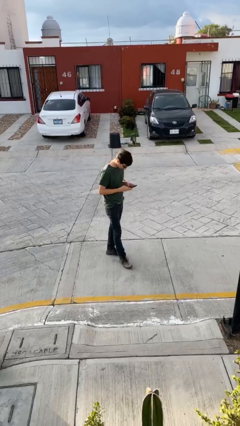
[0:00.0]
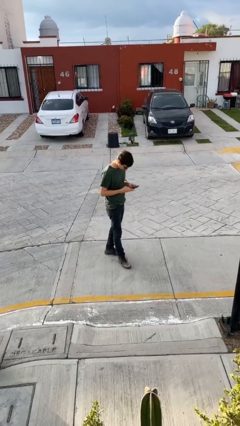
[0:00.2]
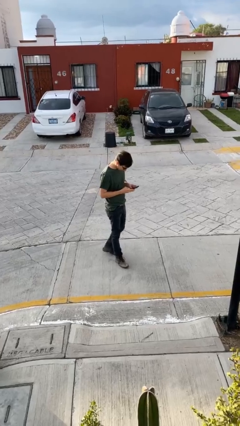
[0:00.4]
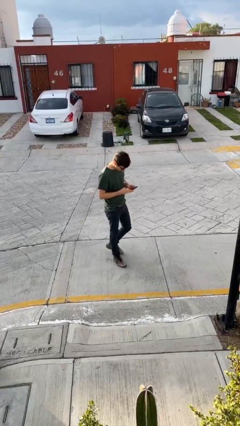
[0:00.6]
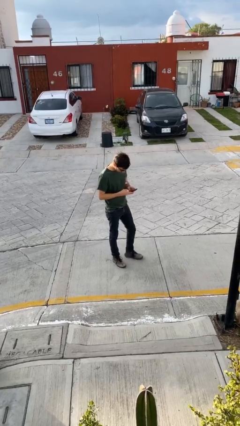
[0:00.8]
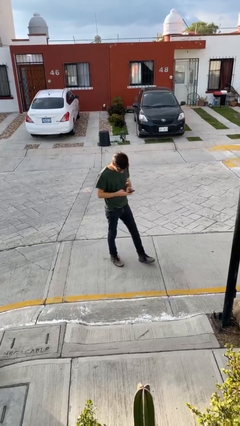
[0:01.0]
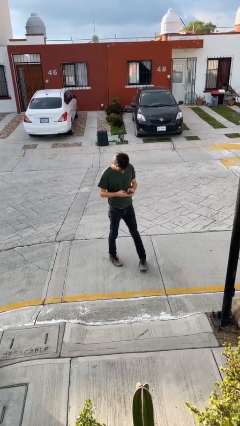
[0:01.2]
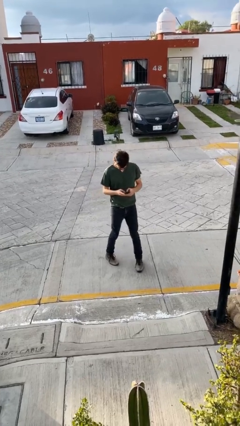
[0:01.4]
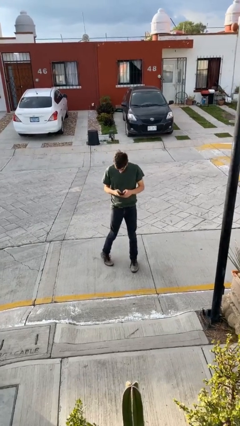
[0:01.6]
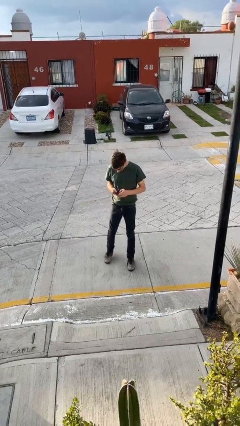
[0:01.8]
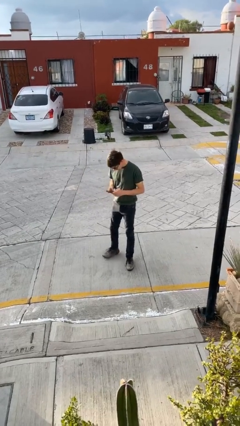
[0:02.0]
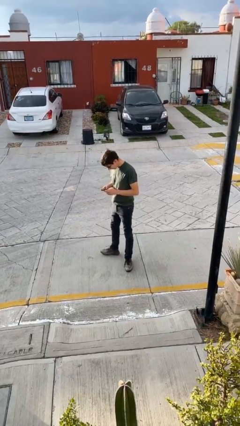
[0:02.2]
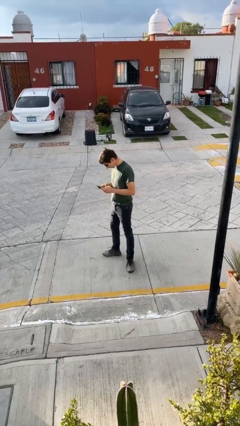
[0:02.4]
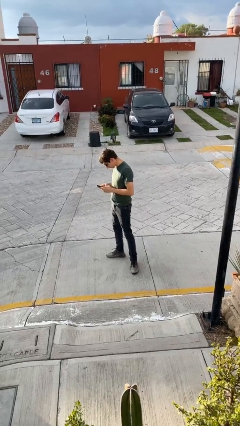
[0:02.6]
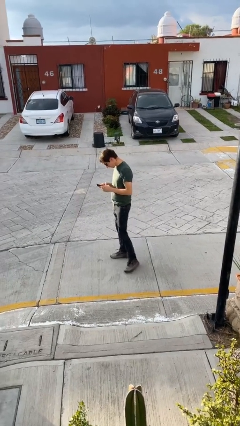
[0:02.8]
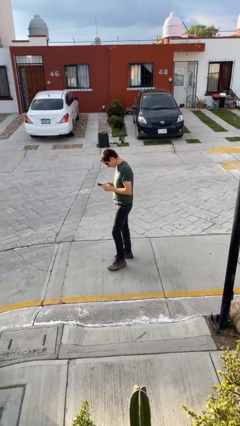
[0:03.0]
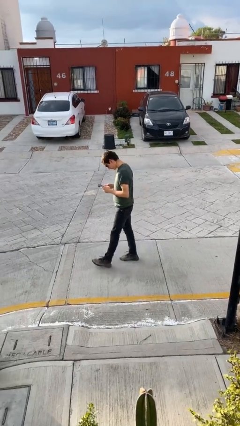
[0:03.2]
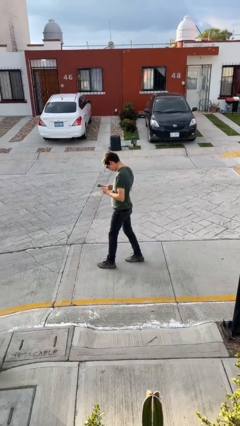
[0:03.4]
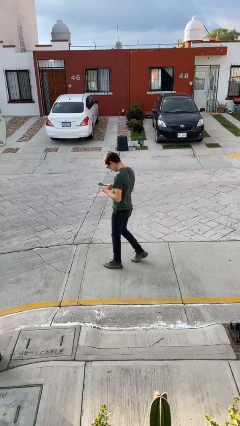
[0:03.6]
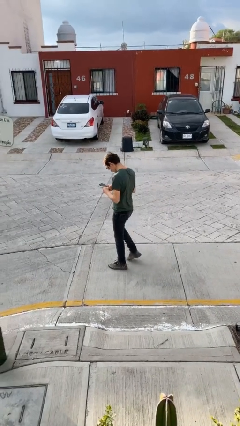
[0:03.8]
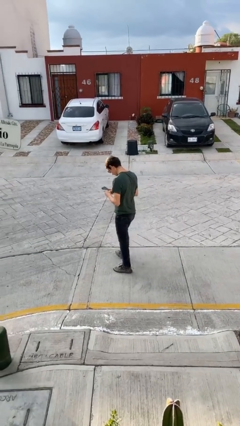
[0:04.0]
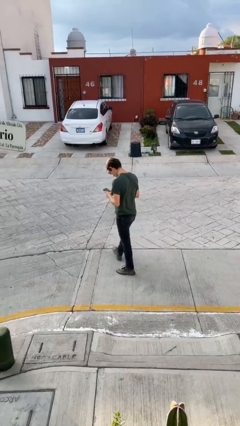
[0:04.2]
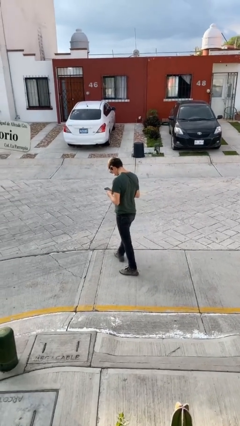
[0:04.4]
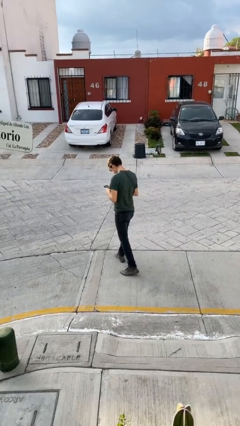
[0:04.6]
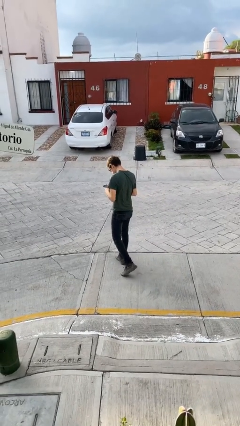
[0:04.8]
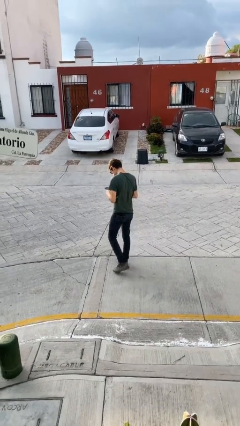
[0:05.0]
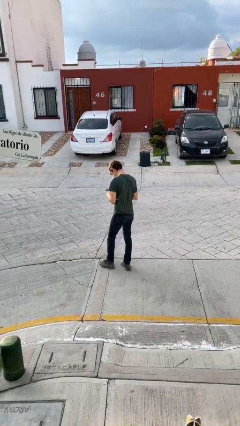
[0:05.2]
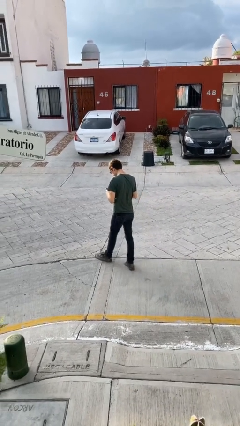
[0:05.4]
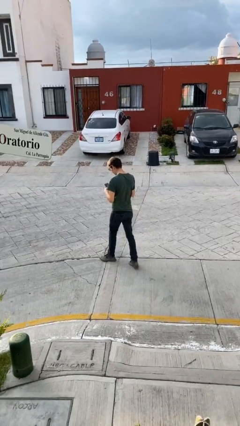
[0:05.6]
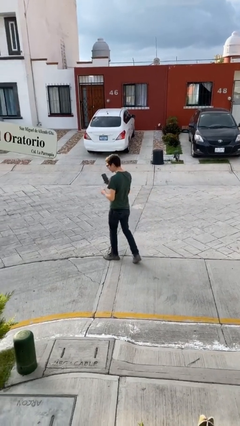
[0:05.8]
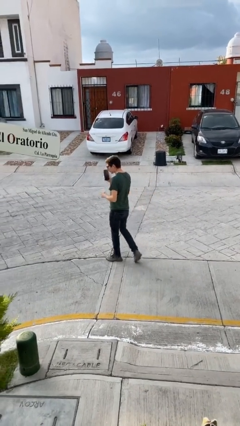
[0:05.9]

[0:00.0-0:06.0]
person texts on phone

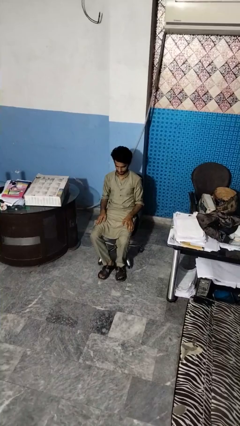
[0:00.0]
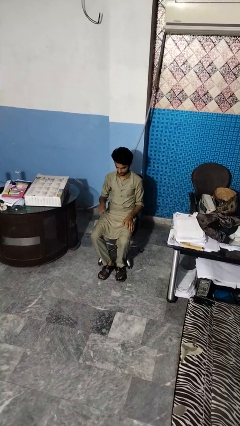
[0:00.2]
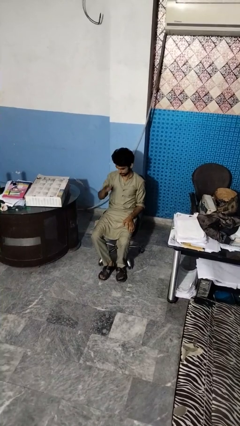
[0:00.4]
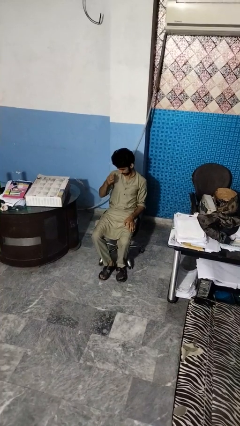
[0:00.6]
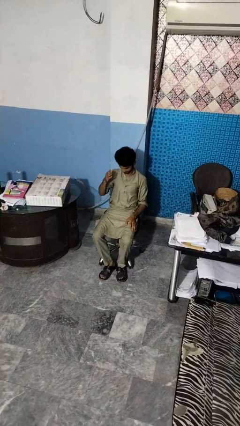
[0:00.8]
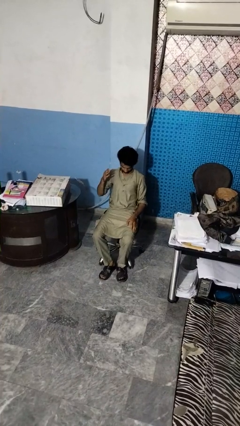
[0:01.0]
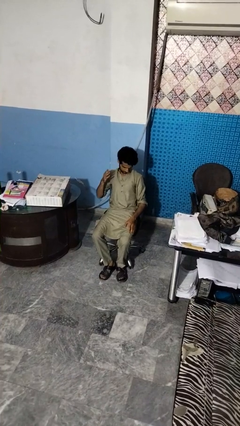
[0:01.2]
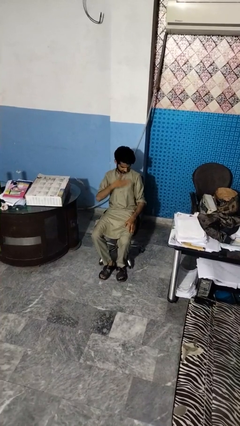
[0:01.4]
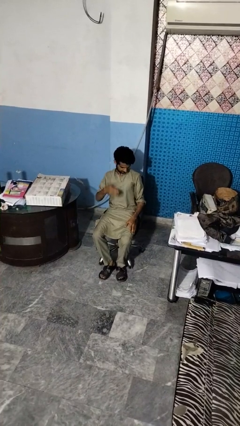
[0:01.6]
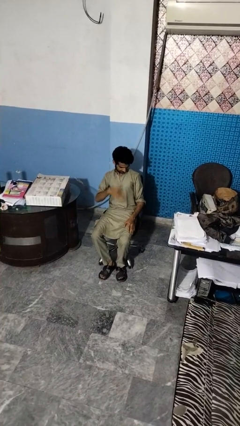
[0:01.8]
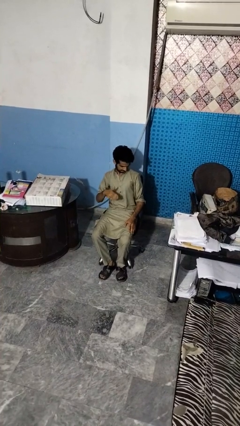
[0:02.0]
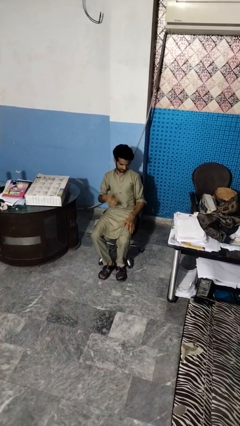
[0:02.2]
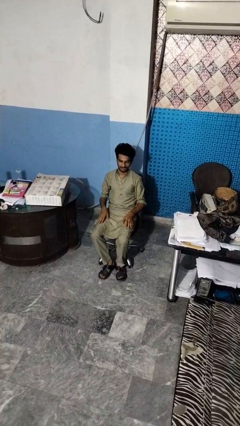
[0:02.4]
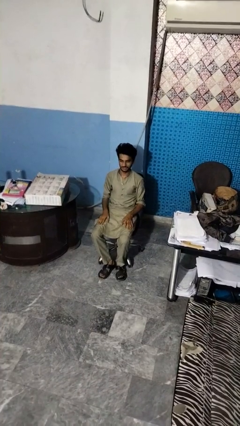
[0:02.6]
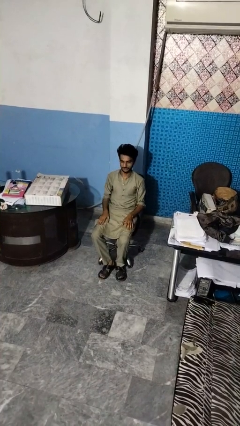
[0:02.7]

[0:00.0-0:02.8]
person swats bug

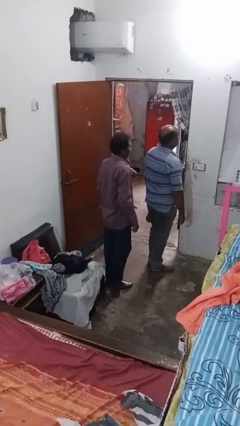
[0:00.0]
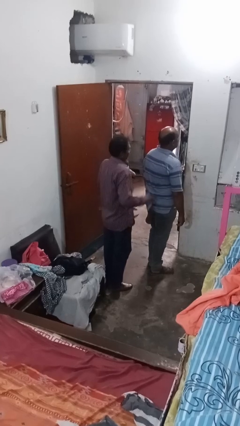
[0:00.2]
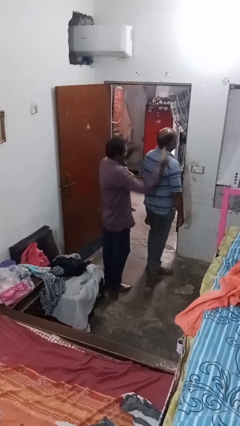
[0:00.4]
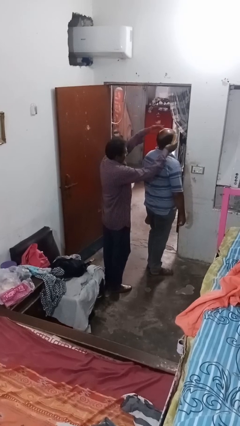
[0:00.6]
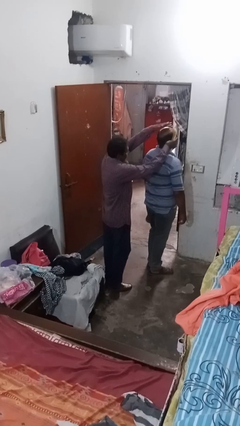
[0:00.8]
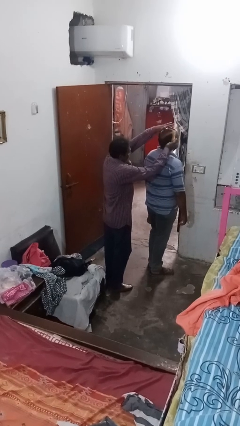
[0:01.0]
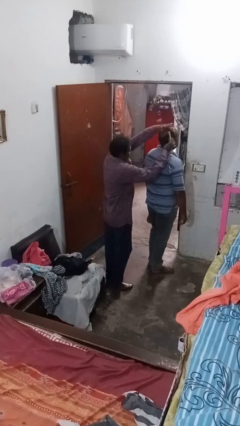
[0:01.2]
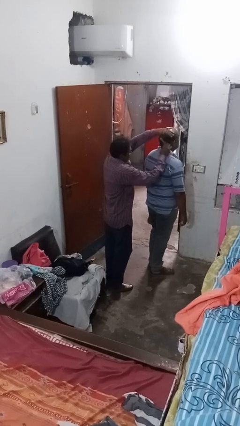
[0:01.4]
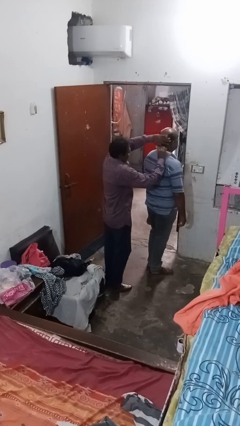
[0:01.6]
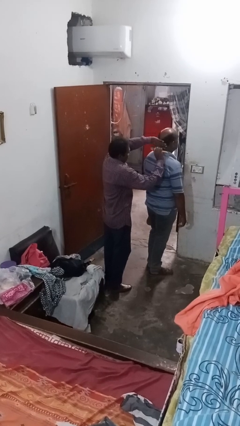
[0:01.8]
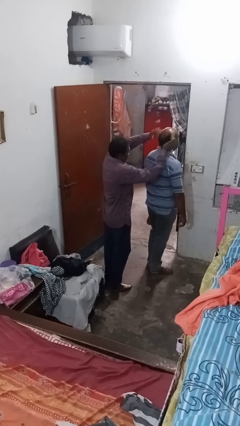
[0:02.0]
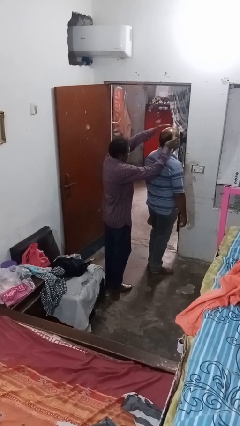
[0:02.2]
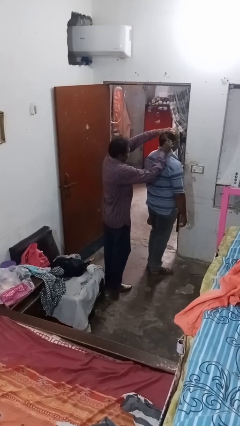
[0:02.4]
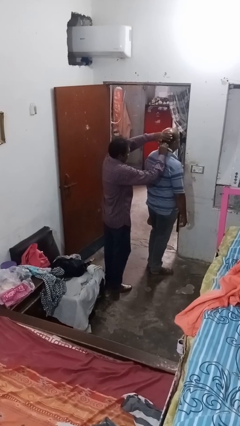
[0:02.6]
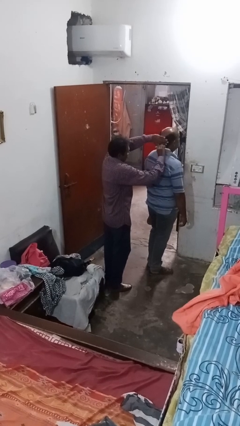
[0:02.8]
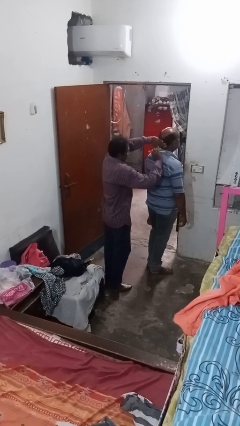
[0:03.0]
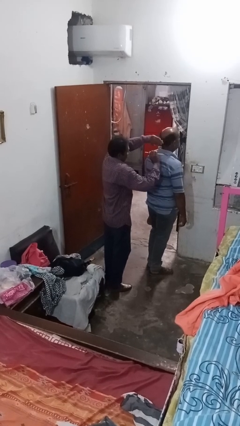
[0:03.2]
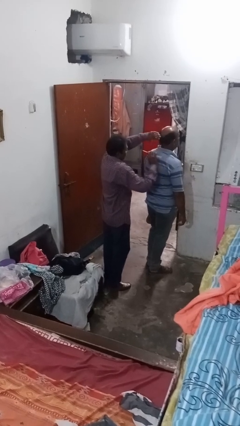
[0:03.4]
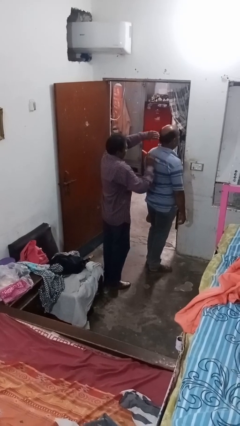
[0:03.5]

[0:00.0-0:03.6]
person brushes hair of person

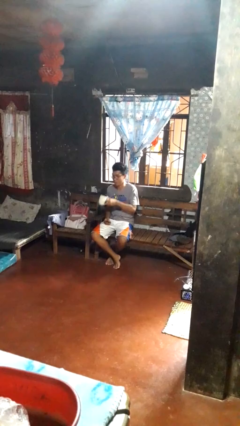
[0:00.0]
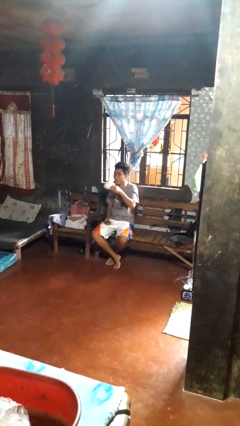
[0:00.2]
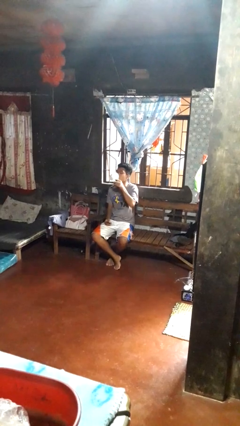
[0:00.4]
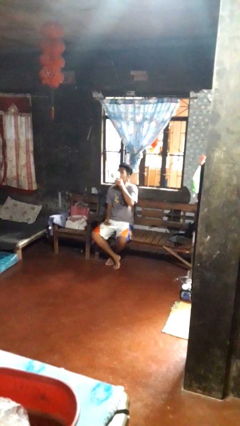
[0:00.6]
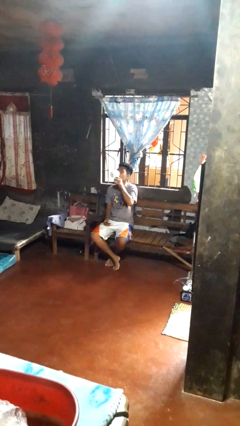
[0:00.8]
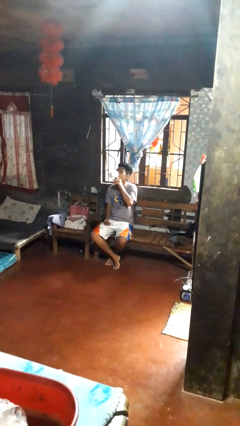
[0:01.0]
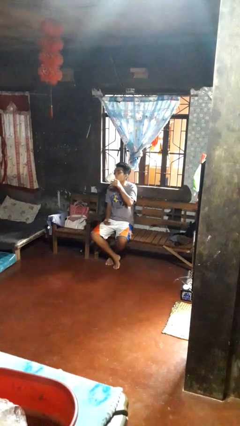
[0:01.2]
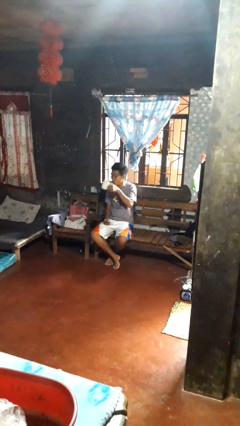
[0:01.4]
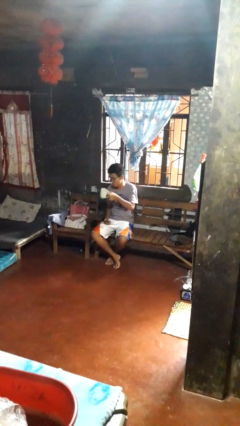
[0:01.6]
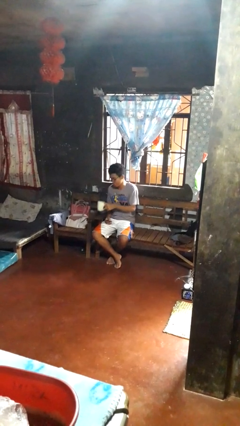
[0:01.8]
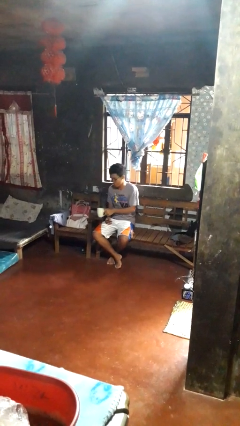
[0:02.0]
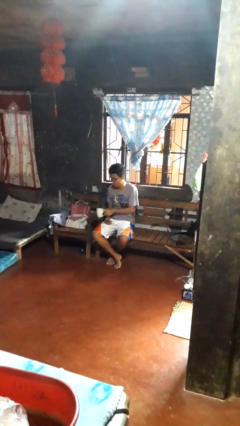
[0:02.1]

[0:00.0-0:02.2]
person drinks from cup

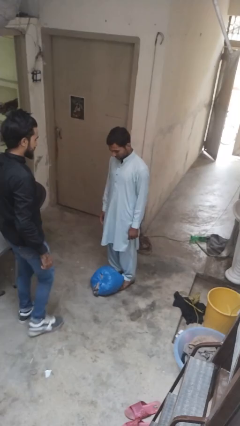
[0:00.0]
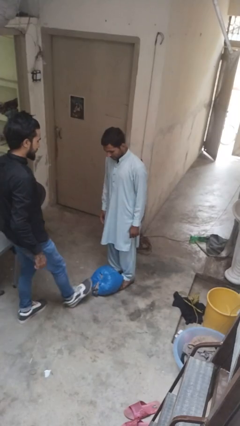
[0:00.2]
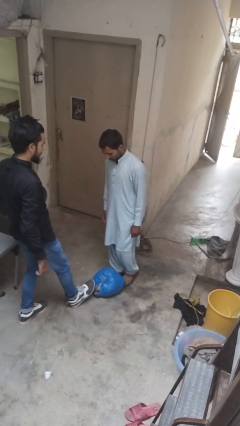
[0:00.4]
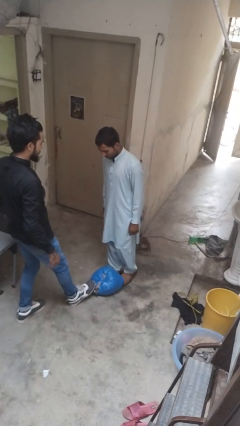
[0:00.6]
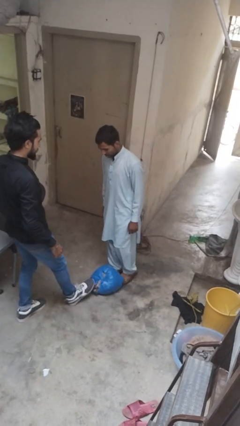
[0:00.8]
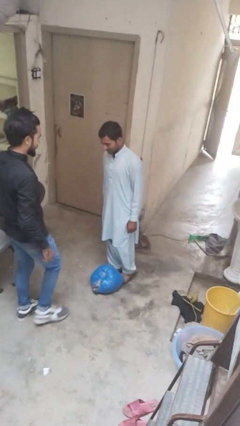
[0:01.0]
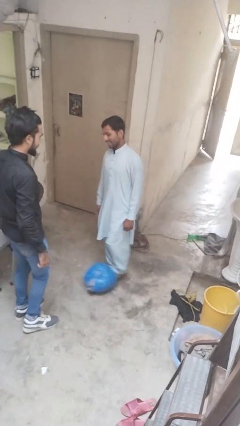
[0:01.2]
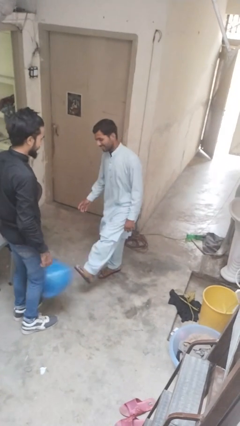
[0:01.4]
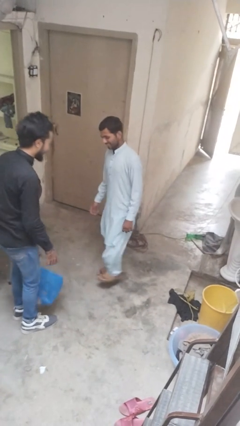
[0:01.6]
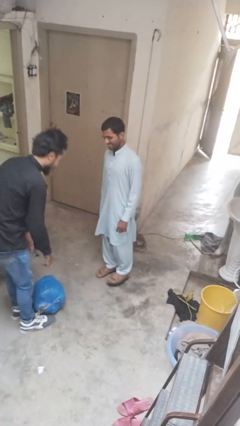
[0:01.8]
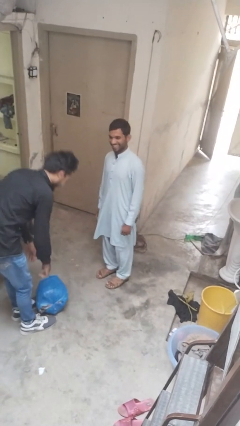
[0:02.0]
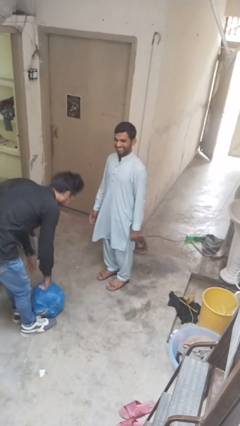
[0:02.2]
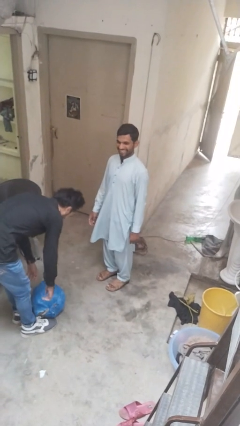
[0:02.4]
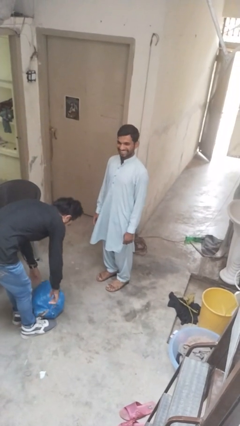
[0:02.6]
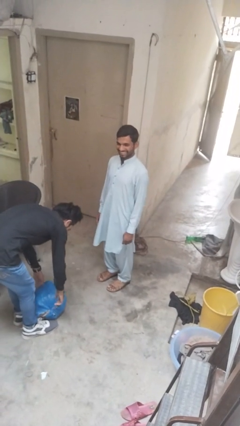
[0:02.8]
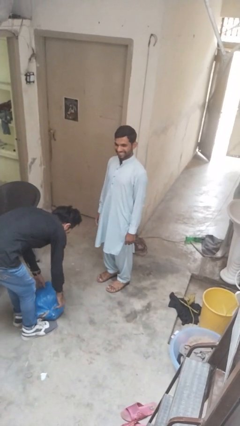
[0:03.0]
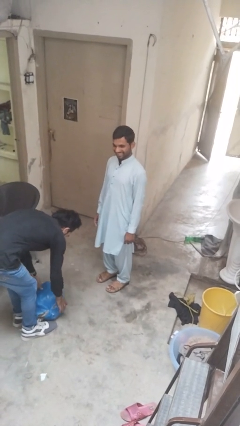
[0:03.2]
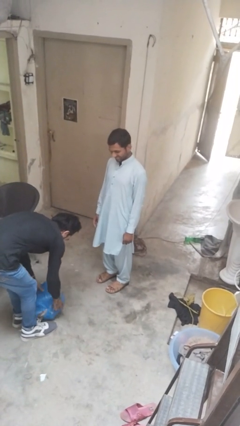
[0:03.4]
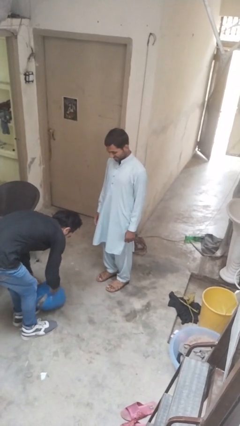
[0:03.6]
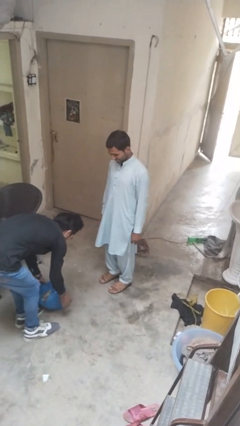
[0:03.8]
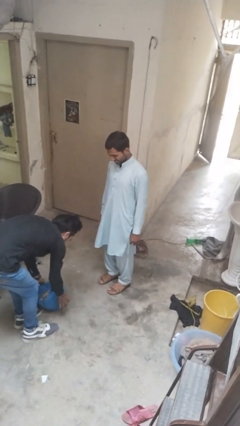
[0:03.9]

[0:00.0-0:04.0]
person kicks object to person
